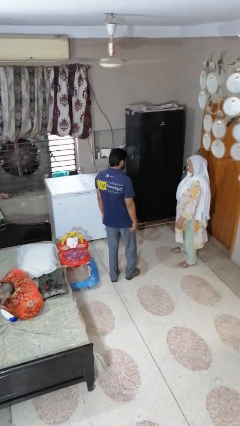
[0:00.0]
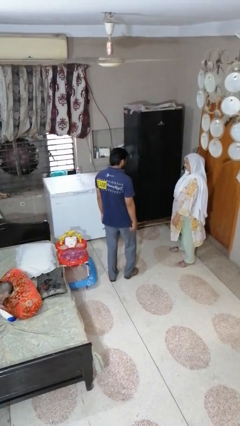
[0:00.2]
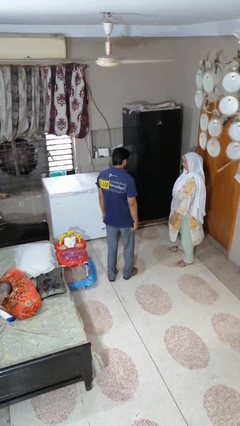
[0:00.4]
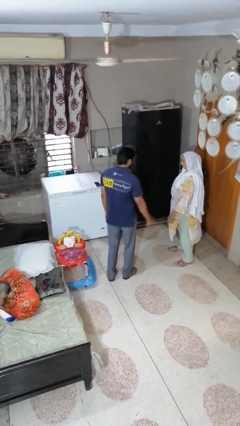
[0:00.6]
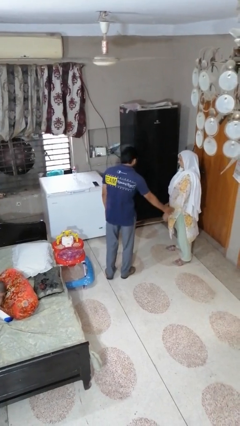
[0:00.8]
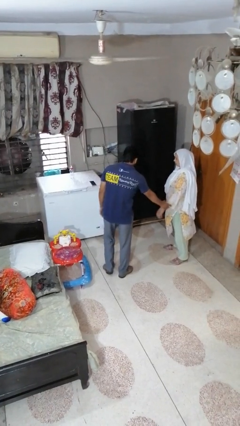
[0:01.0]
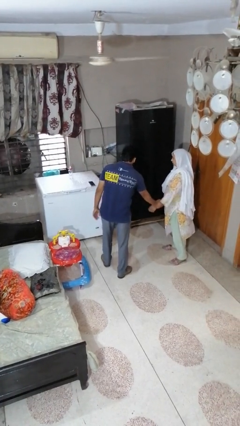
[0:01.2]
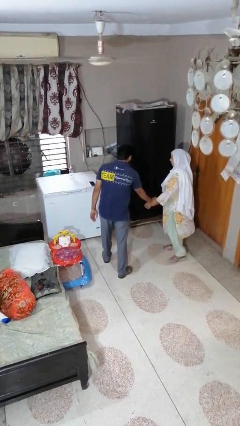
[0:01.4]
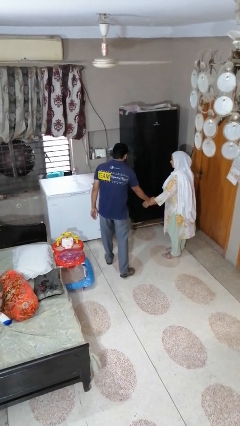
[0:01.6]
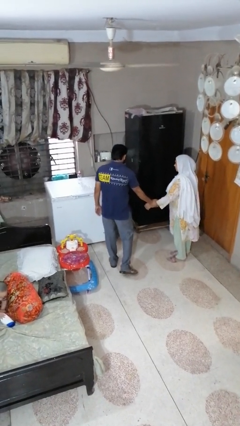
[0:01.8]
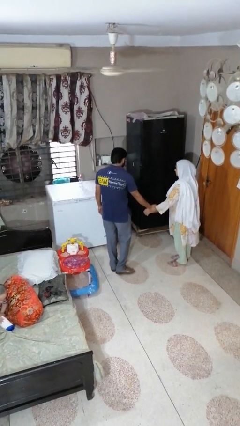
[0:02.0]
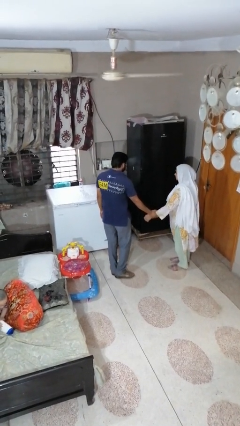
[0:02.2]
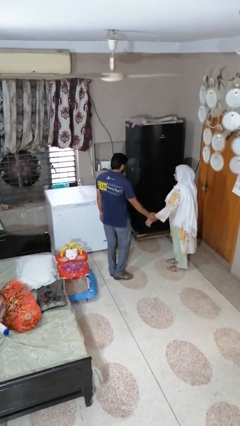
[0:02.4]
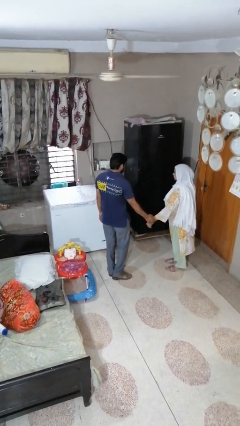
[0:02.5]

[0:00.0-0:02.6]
person grabs person by forearm

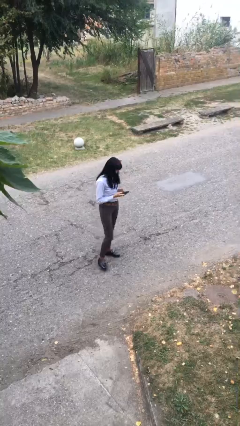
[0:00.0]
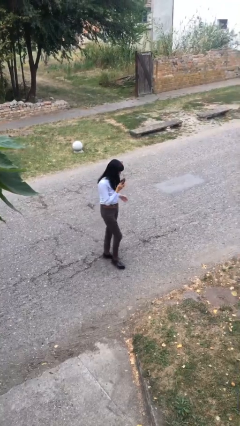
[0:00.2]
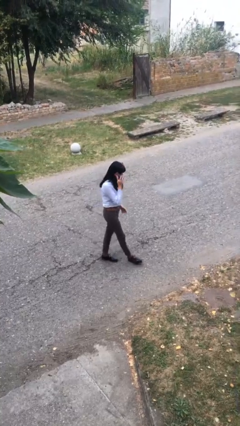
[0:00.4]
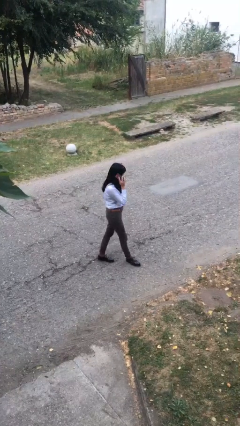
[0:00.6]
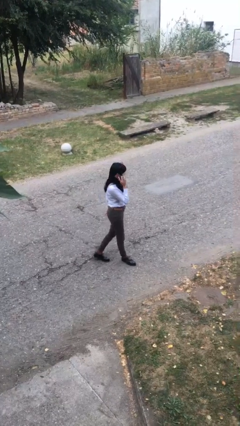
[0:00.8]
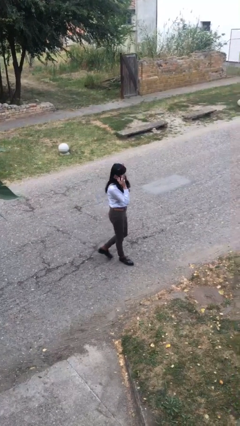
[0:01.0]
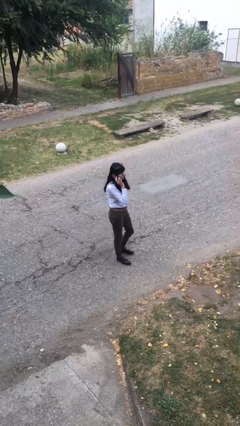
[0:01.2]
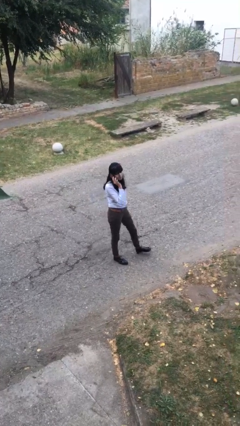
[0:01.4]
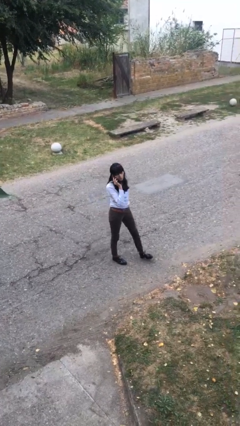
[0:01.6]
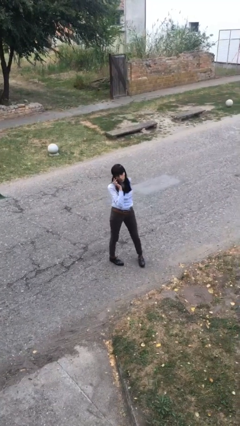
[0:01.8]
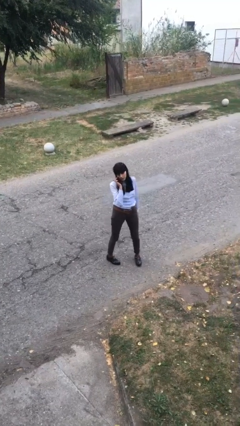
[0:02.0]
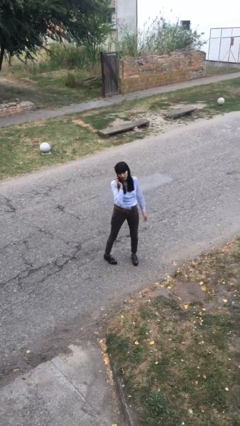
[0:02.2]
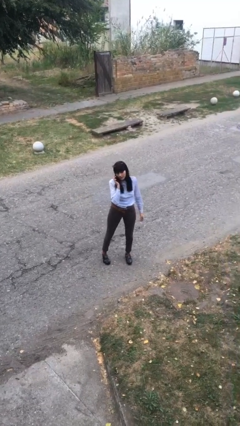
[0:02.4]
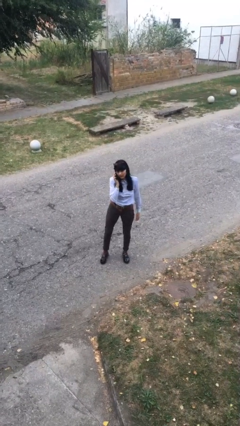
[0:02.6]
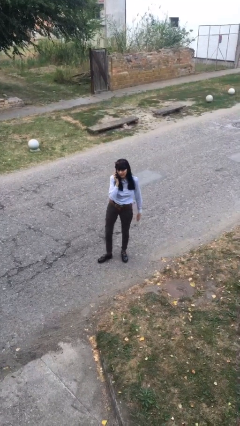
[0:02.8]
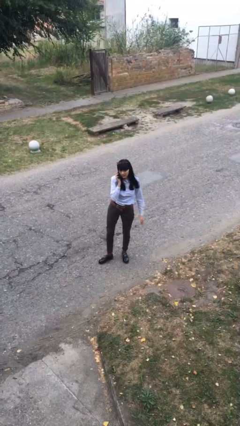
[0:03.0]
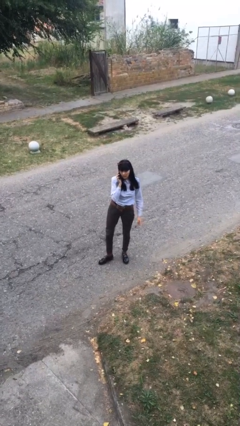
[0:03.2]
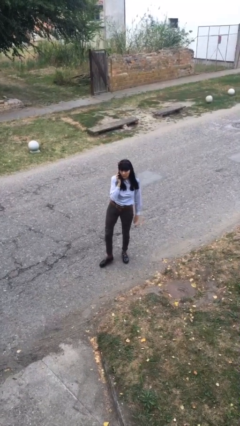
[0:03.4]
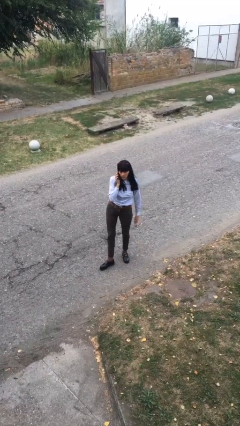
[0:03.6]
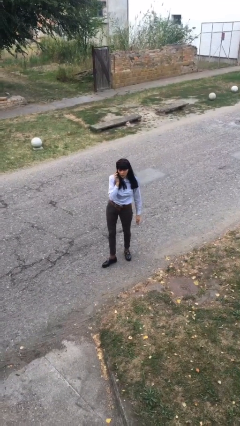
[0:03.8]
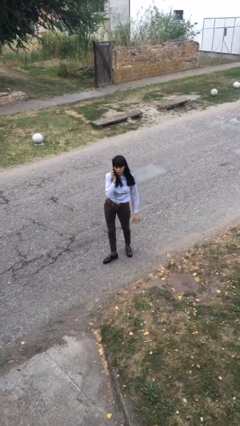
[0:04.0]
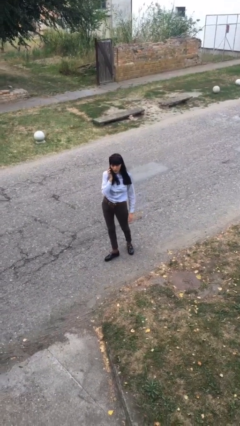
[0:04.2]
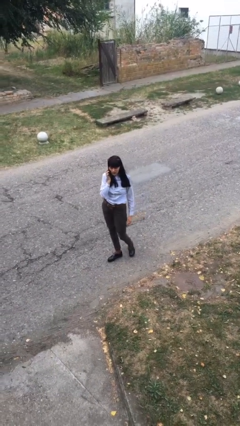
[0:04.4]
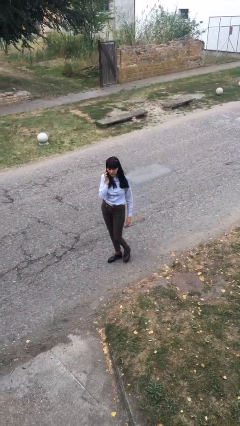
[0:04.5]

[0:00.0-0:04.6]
person talks on phone

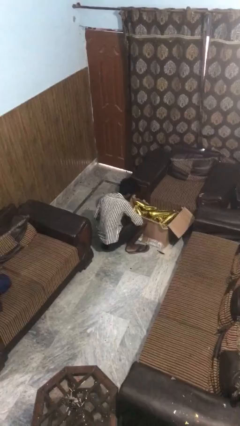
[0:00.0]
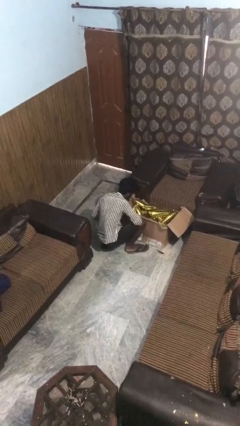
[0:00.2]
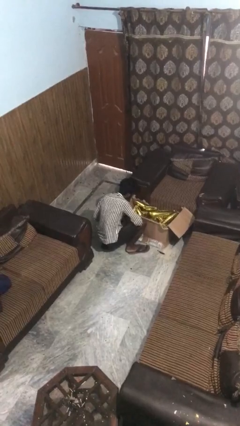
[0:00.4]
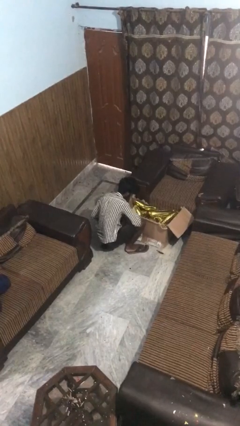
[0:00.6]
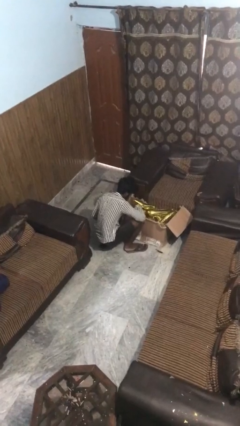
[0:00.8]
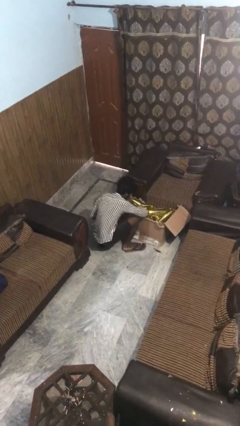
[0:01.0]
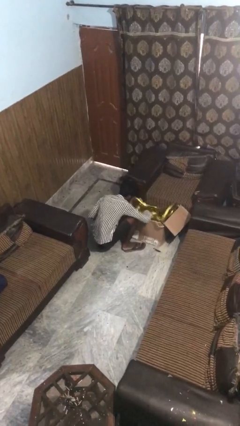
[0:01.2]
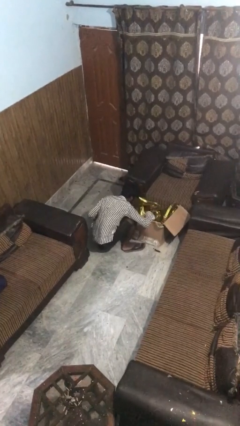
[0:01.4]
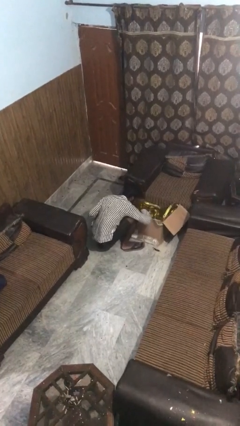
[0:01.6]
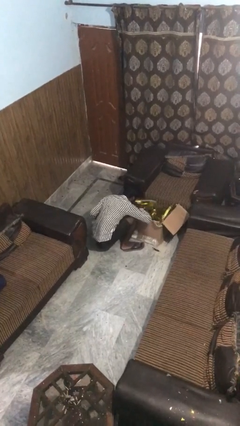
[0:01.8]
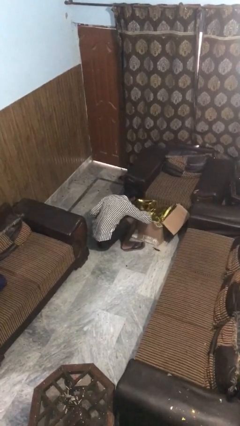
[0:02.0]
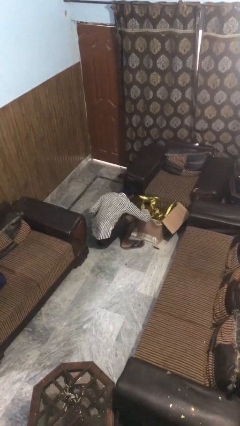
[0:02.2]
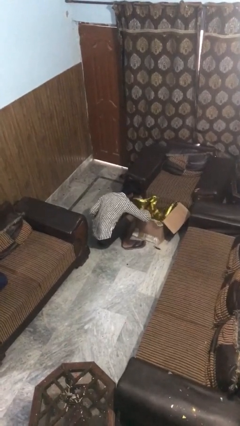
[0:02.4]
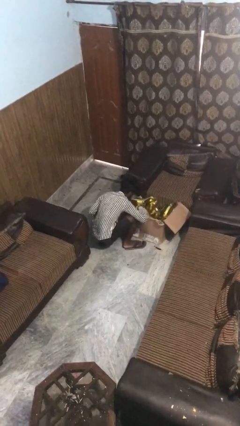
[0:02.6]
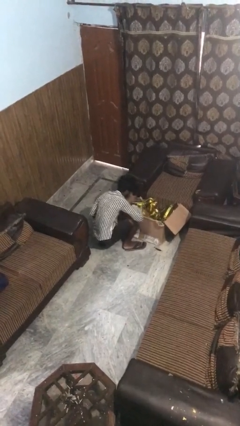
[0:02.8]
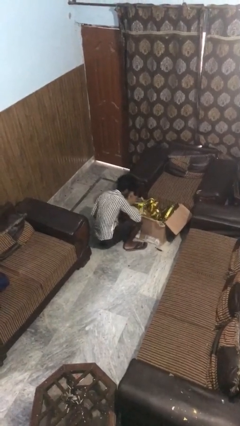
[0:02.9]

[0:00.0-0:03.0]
person searches in box

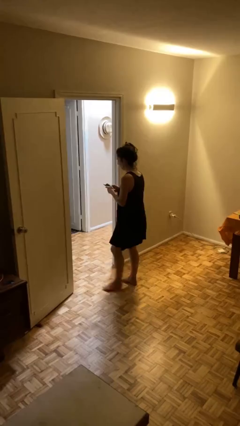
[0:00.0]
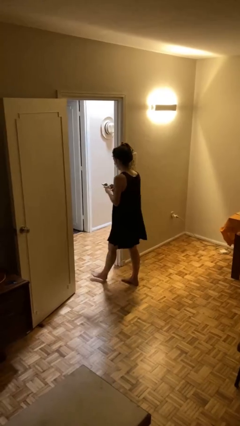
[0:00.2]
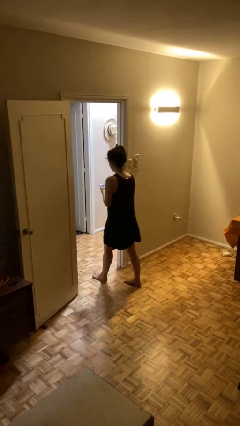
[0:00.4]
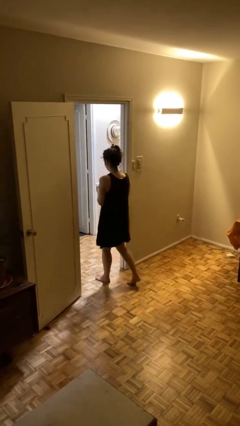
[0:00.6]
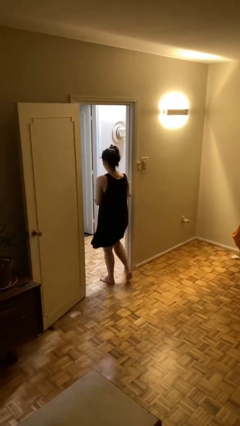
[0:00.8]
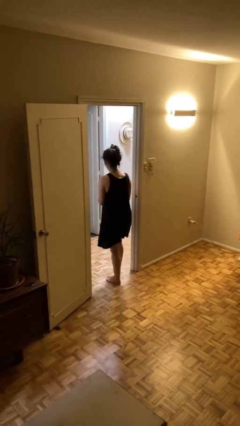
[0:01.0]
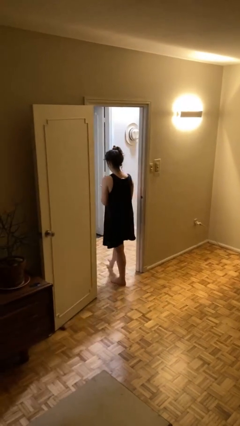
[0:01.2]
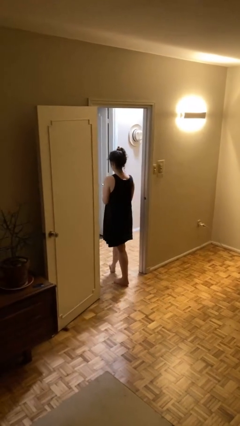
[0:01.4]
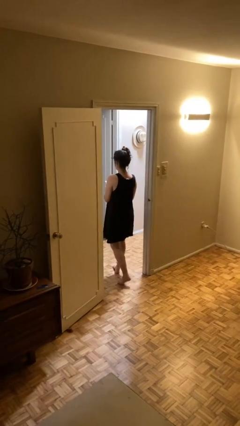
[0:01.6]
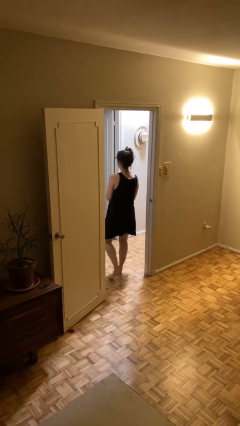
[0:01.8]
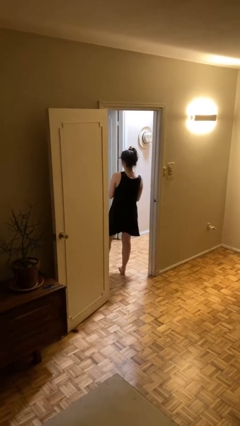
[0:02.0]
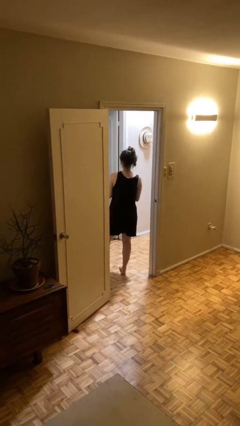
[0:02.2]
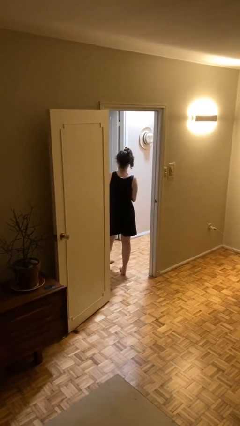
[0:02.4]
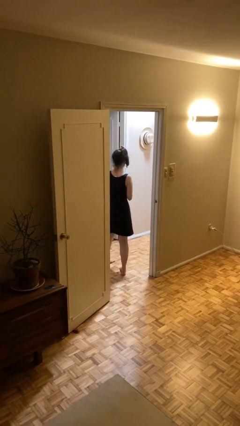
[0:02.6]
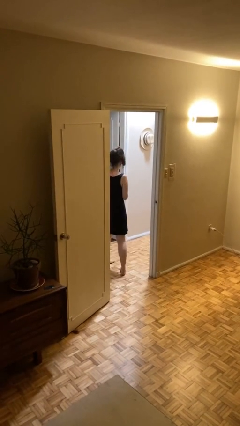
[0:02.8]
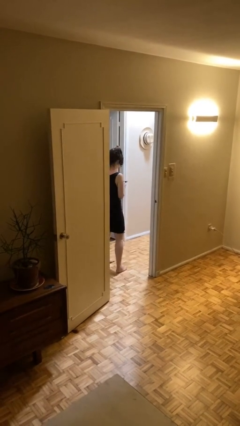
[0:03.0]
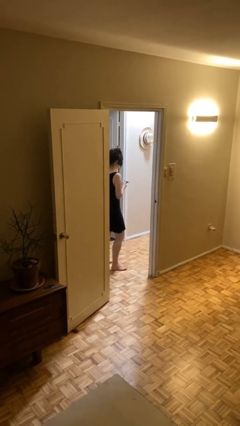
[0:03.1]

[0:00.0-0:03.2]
person exits scene through structure

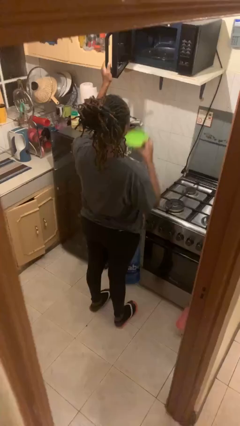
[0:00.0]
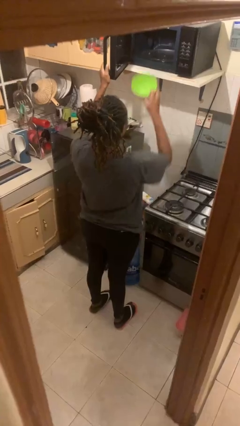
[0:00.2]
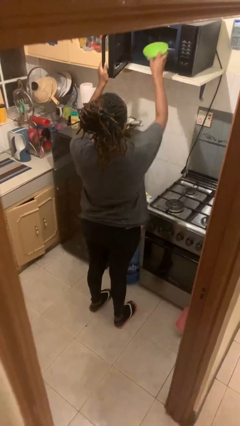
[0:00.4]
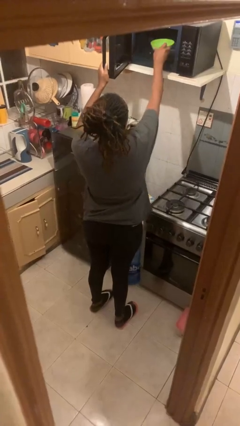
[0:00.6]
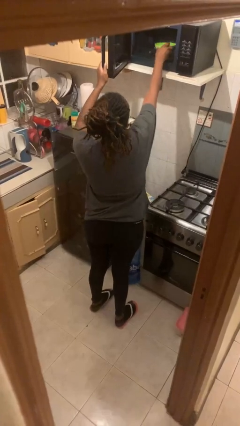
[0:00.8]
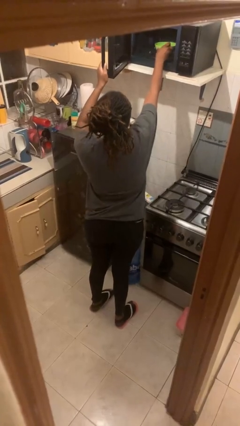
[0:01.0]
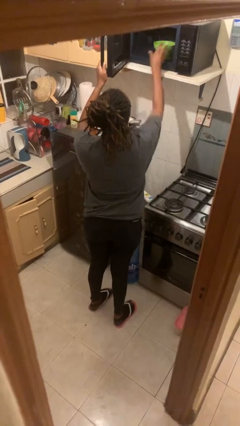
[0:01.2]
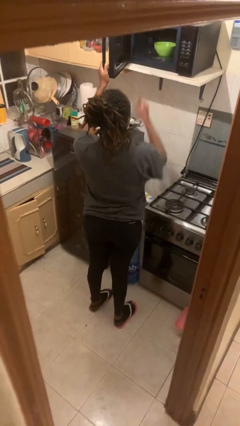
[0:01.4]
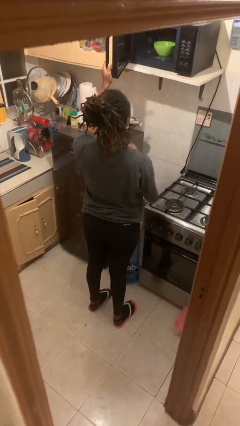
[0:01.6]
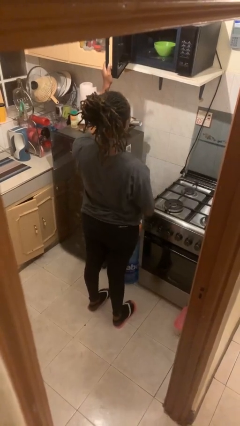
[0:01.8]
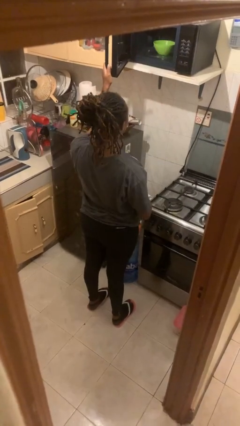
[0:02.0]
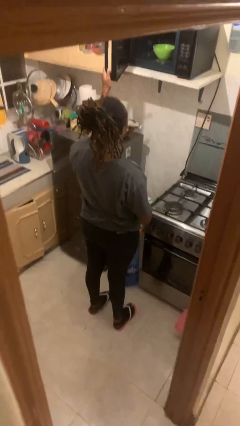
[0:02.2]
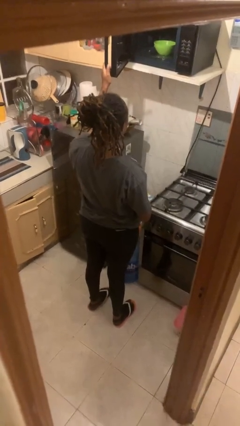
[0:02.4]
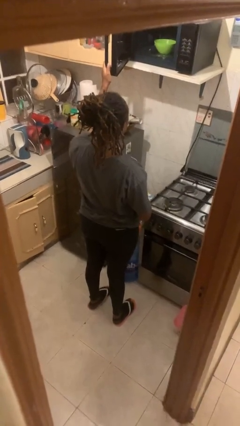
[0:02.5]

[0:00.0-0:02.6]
person puts object into microwave

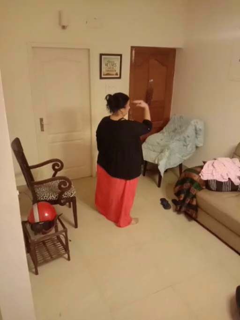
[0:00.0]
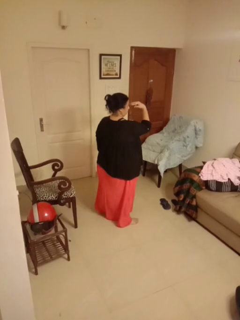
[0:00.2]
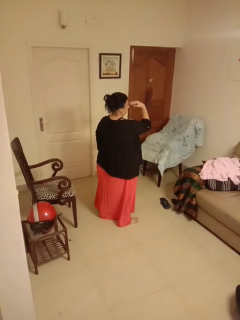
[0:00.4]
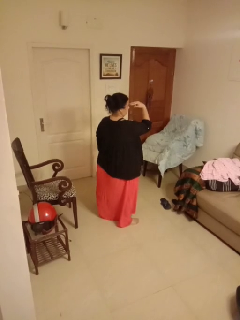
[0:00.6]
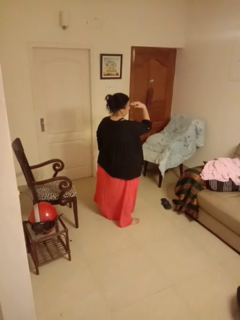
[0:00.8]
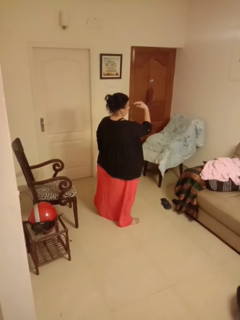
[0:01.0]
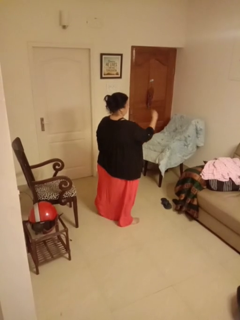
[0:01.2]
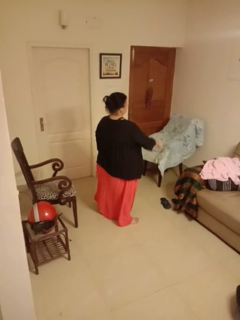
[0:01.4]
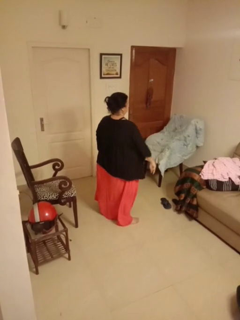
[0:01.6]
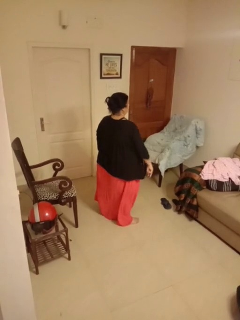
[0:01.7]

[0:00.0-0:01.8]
person gestures watch closely
